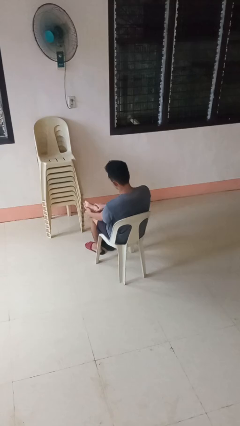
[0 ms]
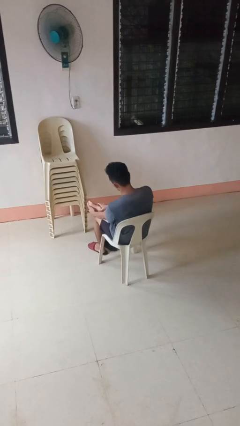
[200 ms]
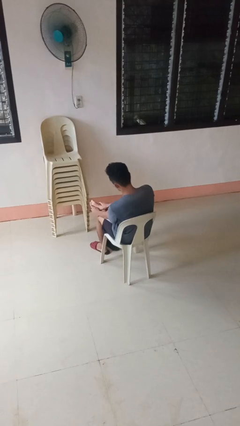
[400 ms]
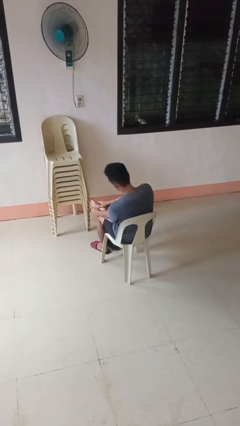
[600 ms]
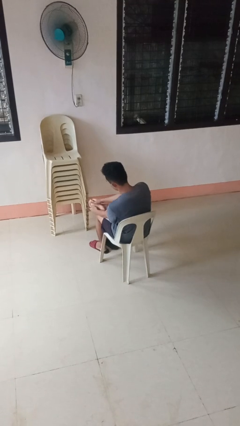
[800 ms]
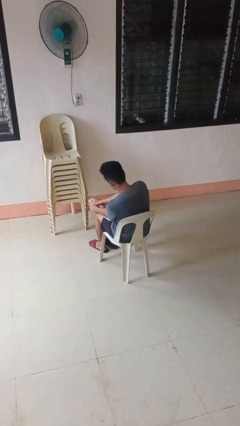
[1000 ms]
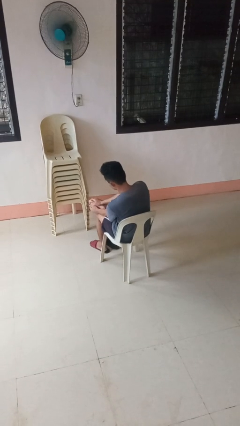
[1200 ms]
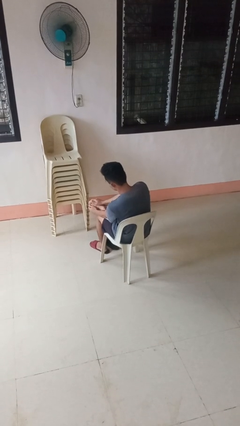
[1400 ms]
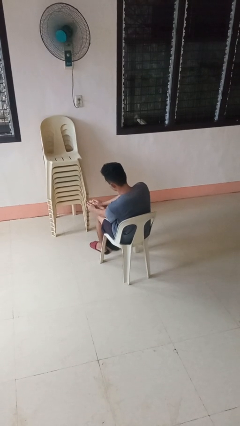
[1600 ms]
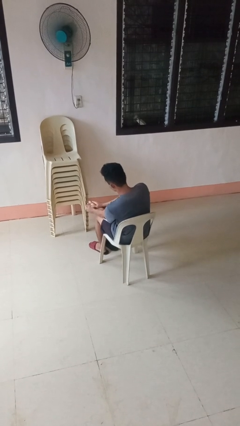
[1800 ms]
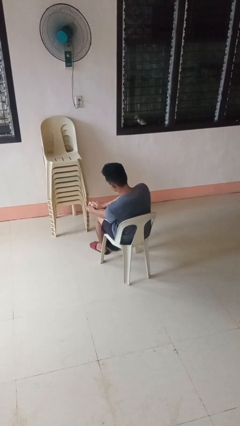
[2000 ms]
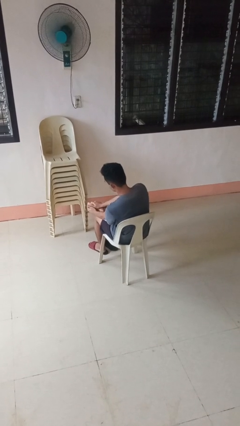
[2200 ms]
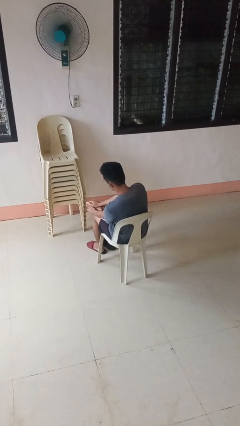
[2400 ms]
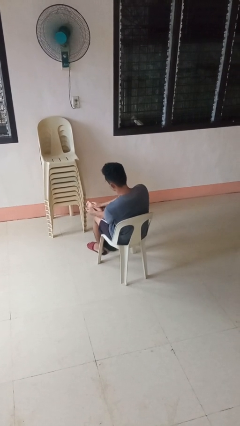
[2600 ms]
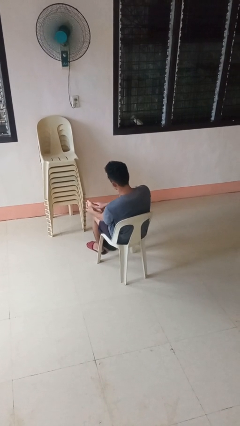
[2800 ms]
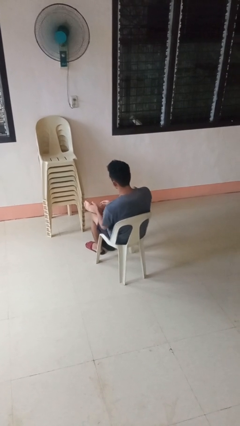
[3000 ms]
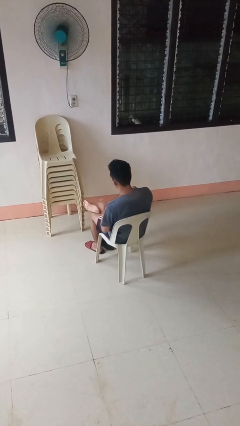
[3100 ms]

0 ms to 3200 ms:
person rubs foot

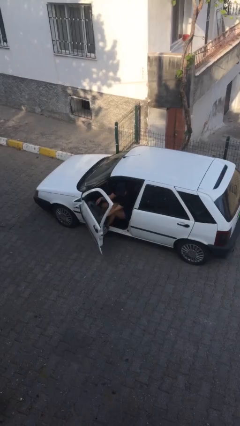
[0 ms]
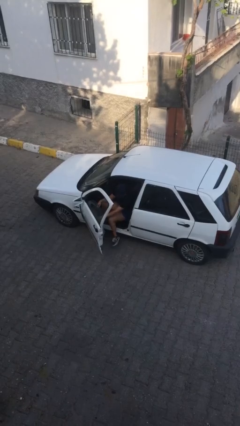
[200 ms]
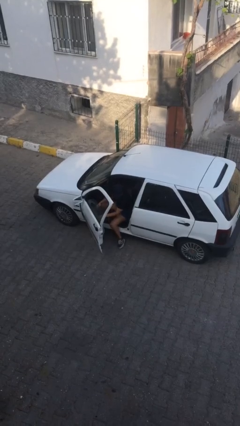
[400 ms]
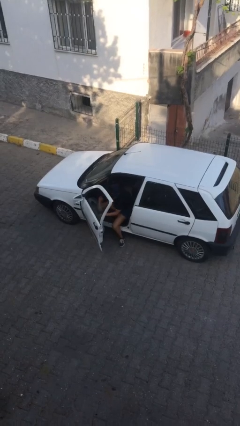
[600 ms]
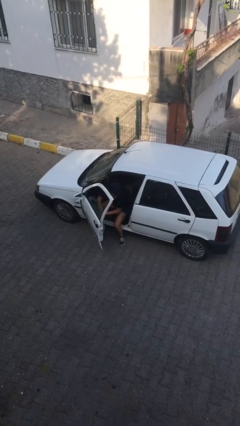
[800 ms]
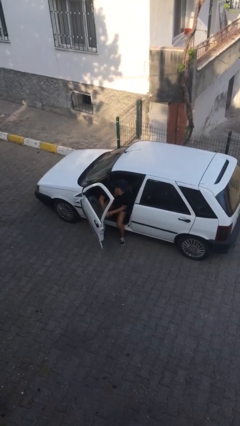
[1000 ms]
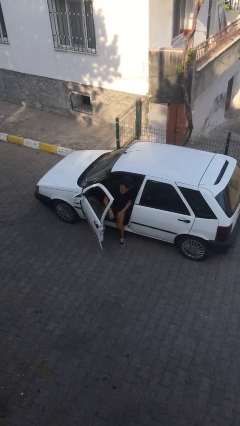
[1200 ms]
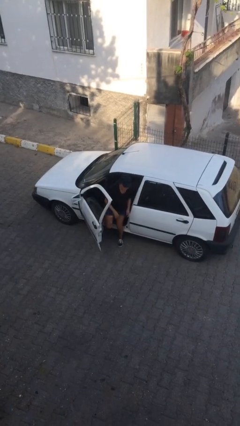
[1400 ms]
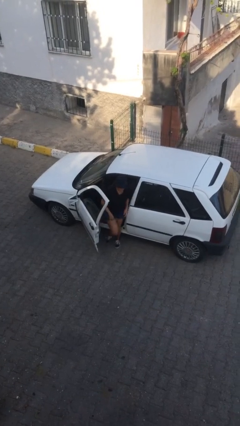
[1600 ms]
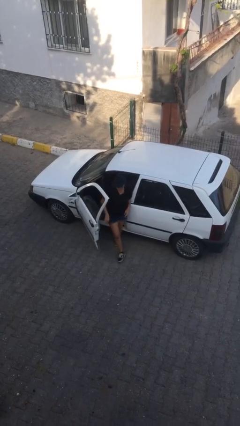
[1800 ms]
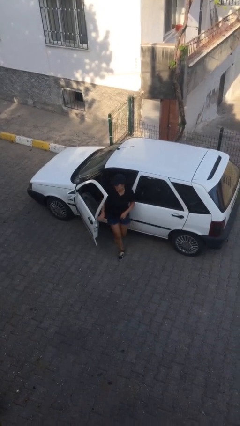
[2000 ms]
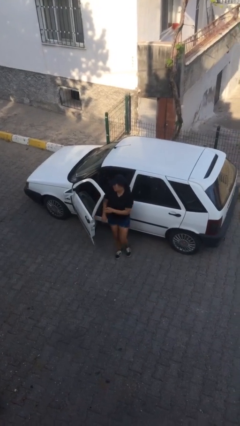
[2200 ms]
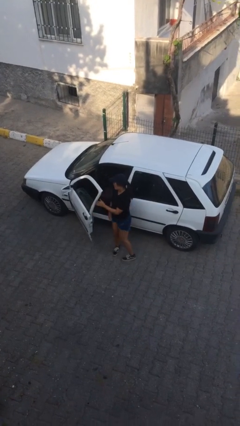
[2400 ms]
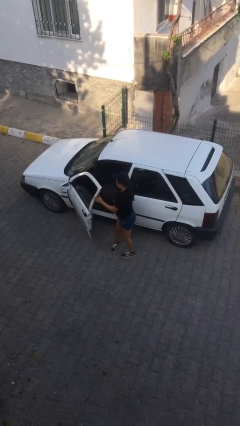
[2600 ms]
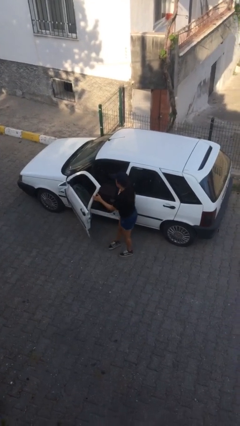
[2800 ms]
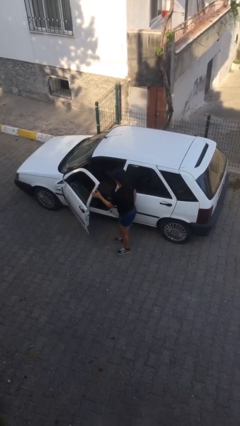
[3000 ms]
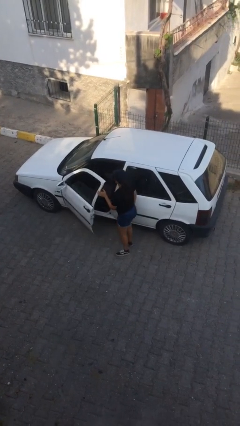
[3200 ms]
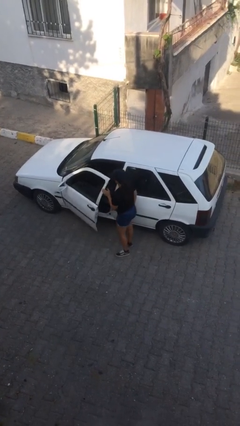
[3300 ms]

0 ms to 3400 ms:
person exits car

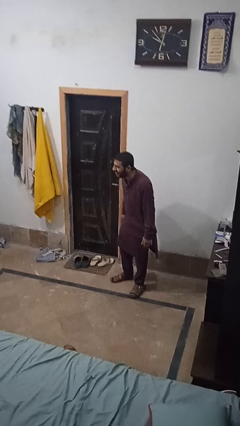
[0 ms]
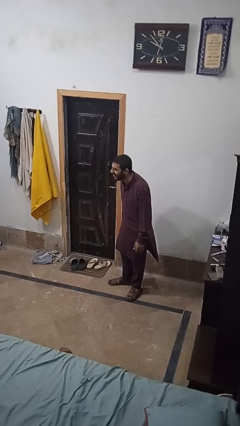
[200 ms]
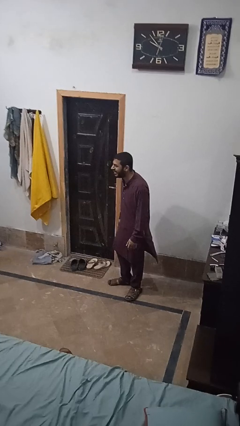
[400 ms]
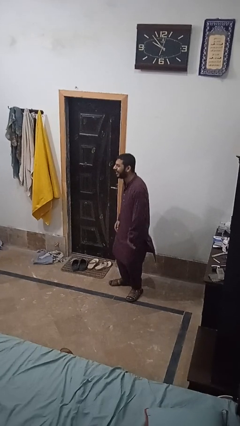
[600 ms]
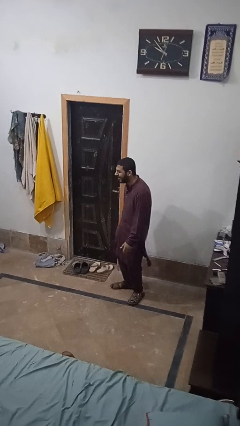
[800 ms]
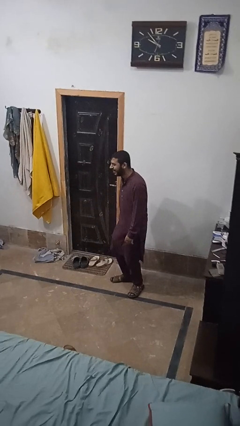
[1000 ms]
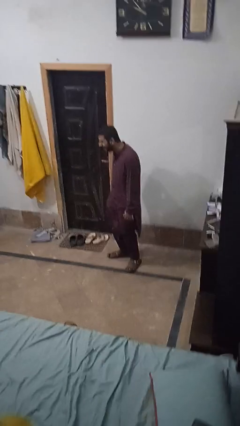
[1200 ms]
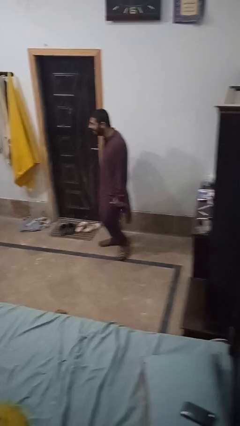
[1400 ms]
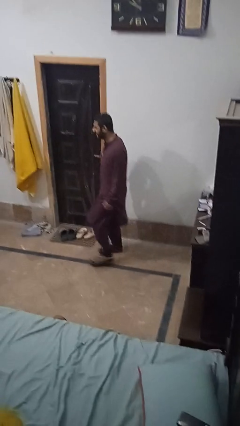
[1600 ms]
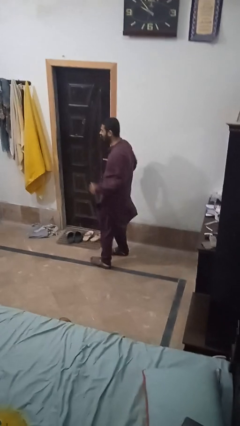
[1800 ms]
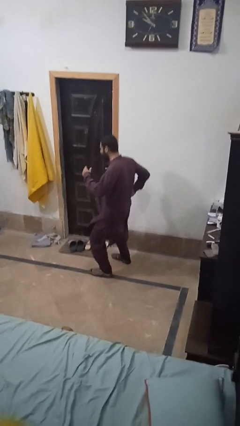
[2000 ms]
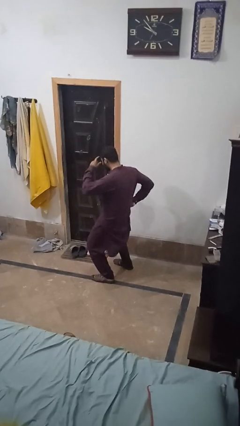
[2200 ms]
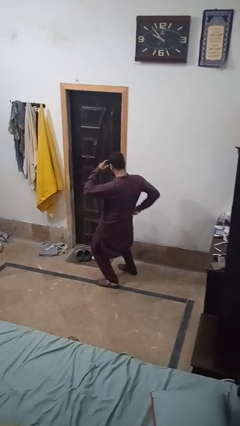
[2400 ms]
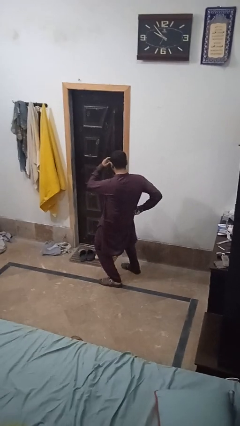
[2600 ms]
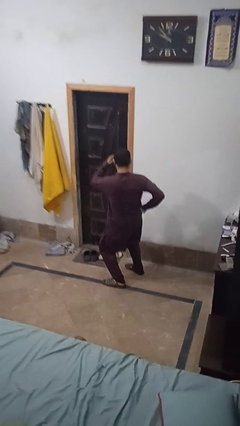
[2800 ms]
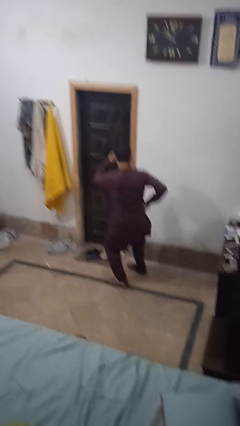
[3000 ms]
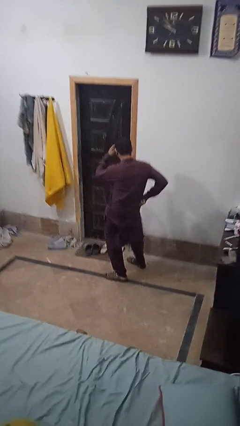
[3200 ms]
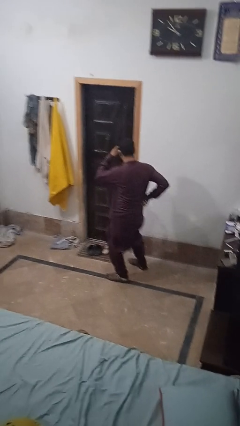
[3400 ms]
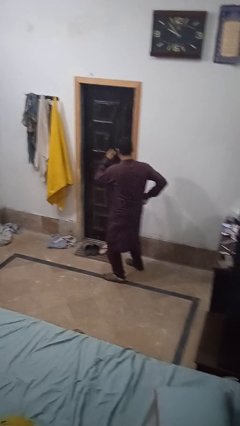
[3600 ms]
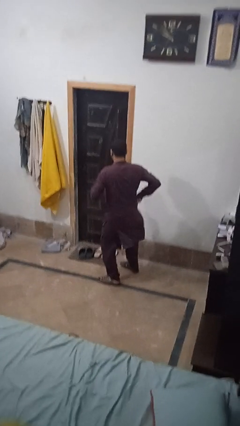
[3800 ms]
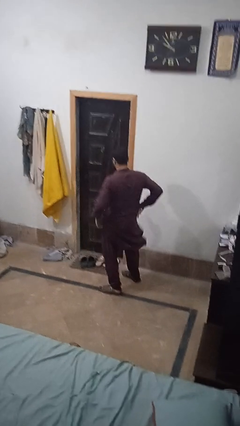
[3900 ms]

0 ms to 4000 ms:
person dances in place

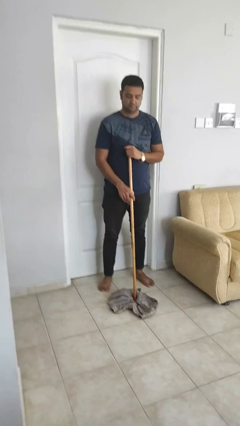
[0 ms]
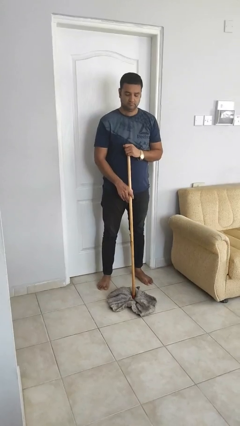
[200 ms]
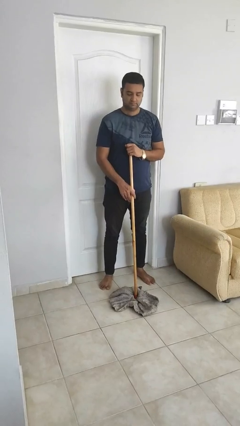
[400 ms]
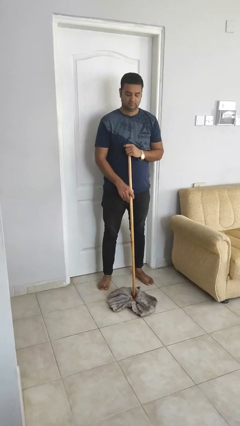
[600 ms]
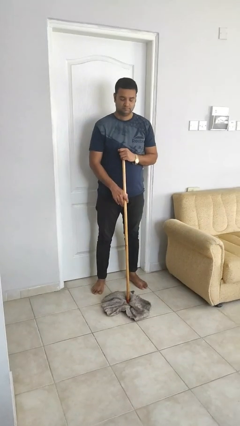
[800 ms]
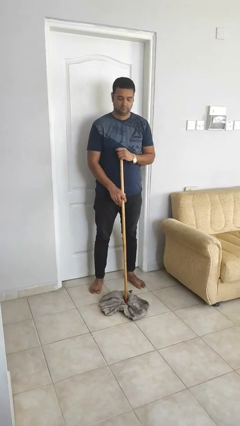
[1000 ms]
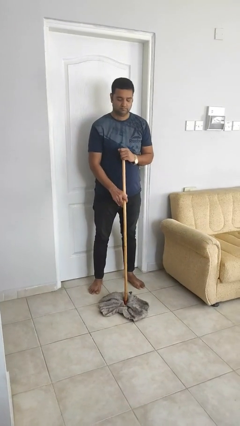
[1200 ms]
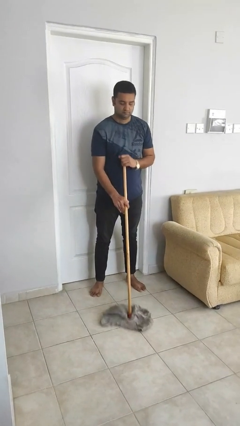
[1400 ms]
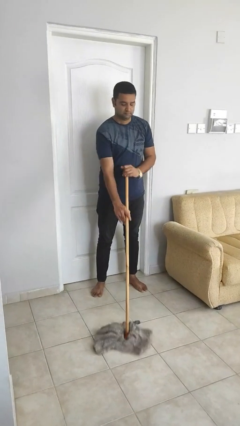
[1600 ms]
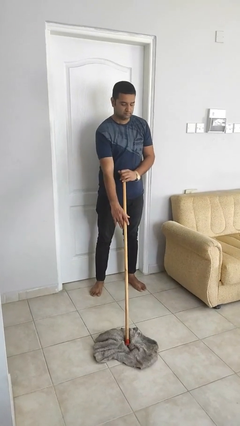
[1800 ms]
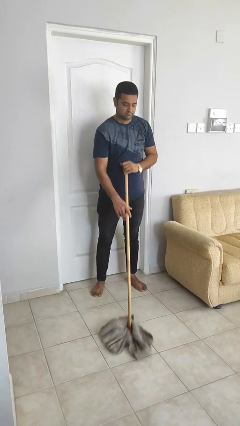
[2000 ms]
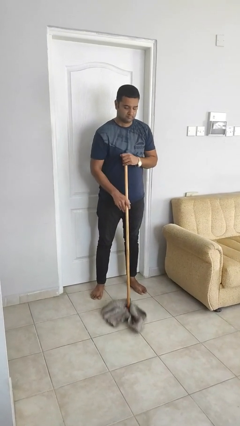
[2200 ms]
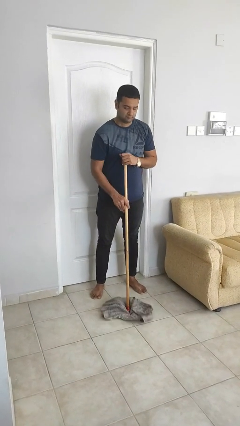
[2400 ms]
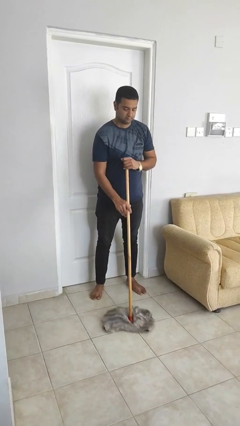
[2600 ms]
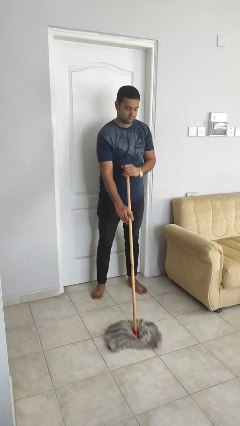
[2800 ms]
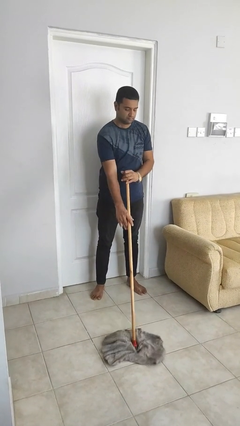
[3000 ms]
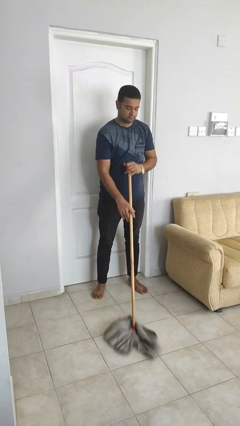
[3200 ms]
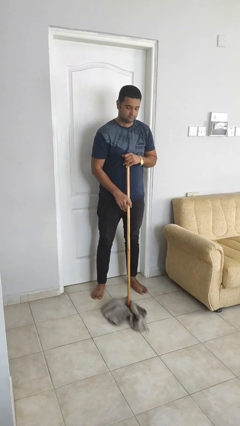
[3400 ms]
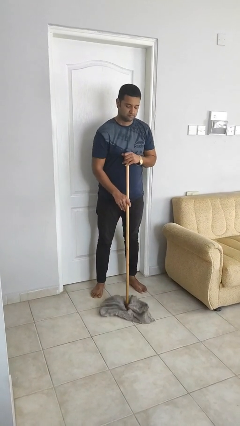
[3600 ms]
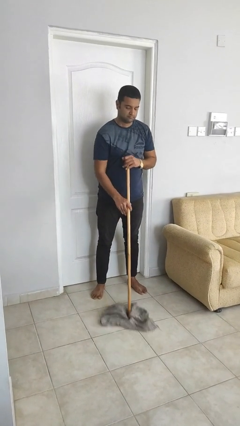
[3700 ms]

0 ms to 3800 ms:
person mops

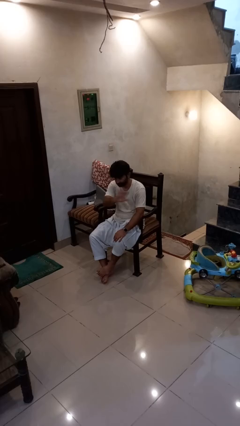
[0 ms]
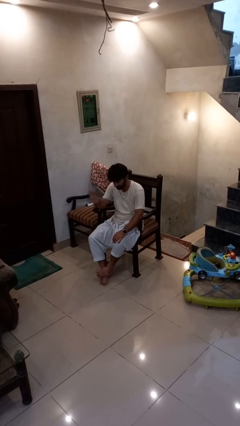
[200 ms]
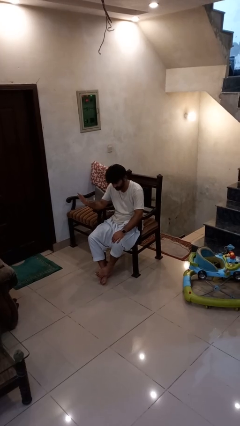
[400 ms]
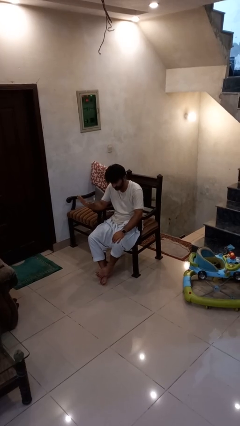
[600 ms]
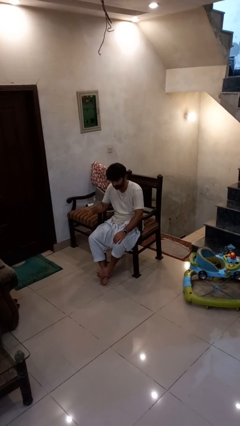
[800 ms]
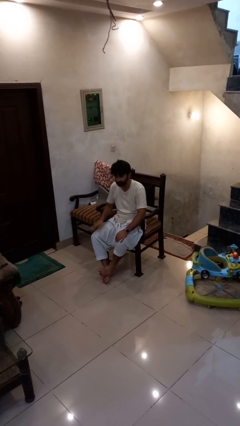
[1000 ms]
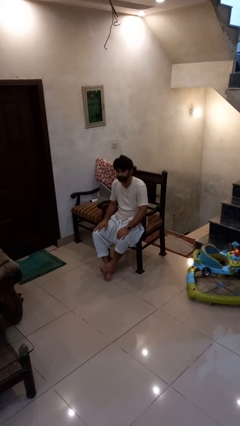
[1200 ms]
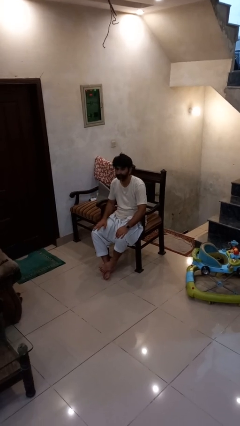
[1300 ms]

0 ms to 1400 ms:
person gestures swipe right

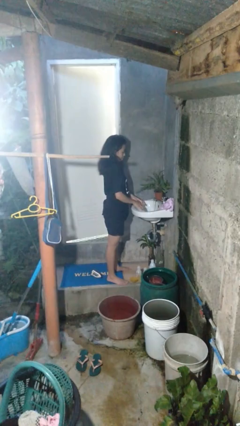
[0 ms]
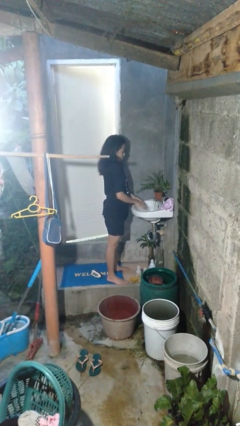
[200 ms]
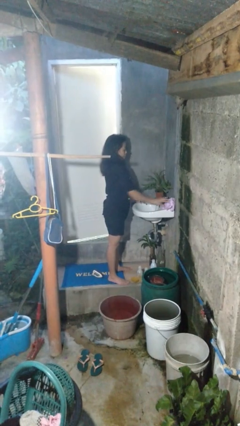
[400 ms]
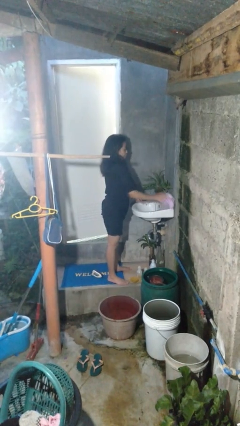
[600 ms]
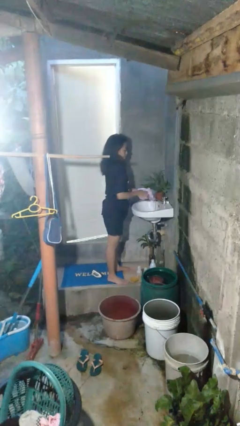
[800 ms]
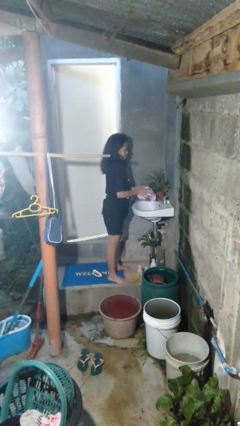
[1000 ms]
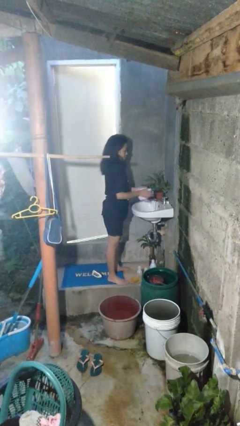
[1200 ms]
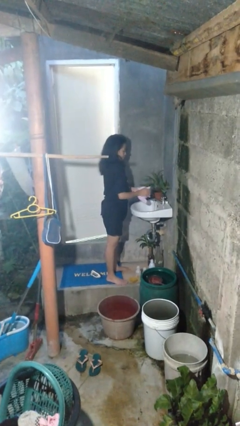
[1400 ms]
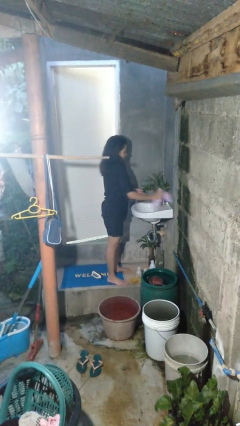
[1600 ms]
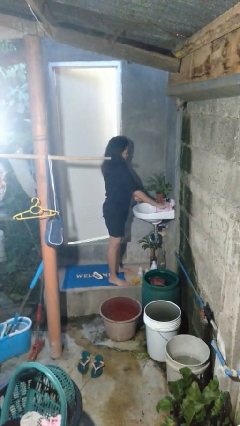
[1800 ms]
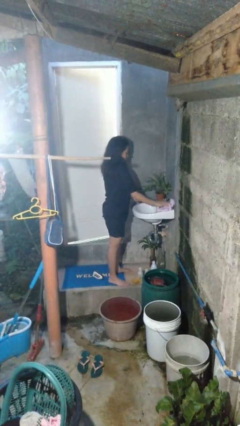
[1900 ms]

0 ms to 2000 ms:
person dries hands with towel
